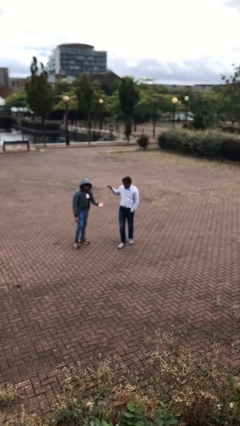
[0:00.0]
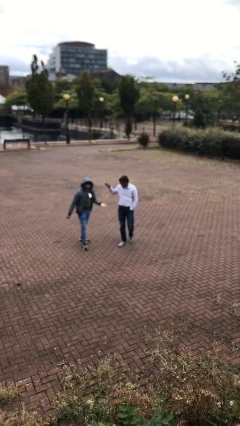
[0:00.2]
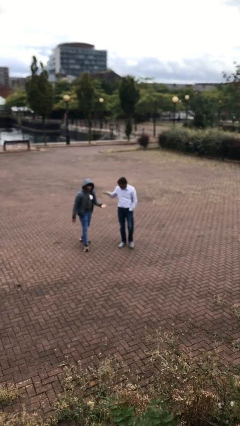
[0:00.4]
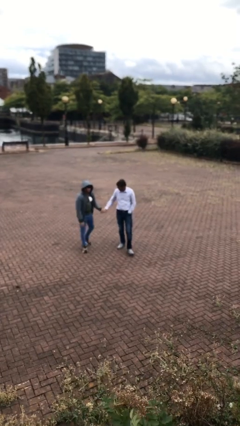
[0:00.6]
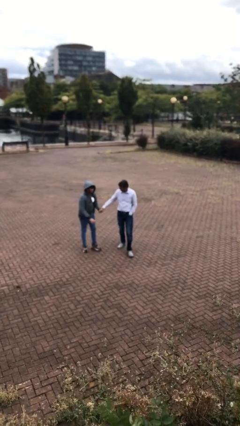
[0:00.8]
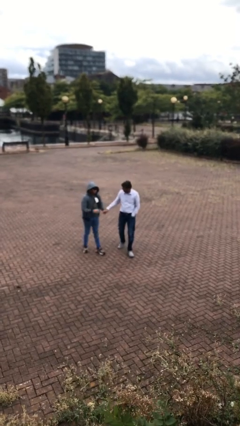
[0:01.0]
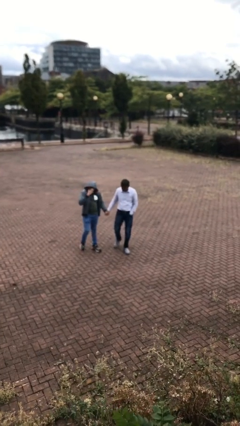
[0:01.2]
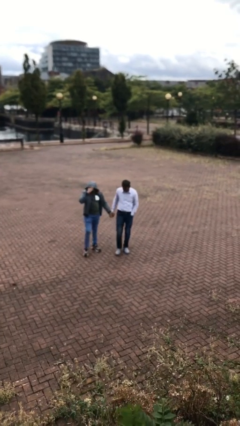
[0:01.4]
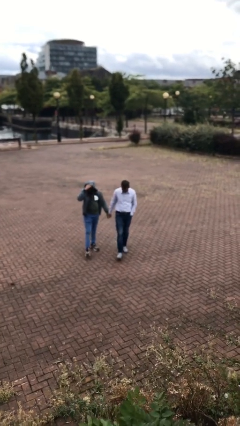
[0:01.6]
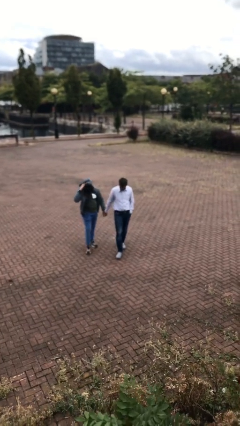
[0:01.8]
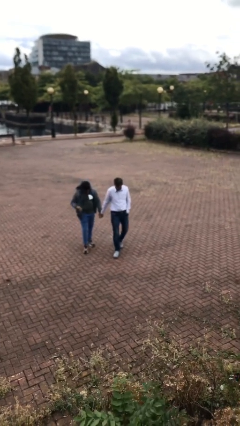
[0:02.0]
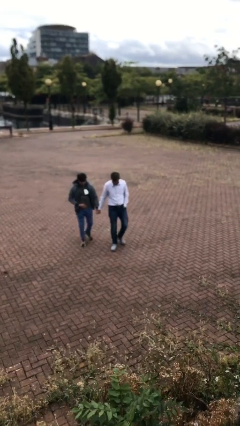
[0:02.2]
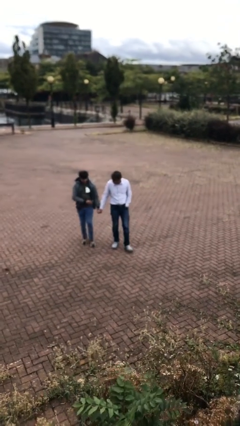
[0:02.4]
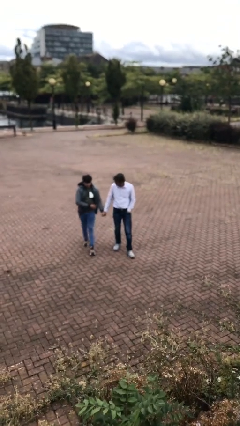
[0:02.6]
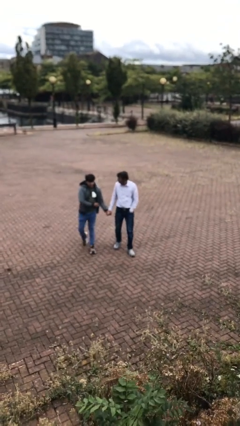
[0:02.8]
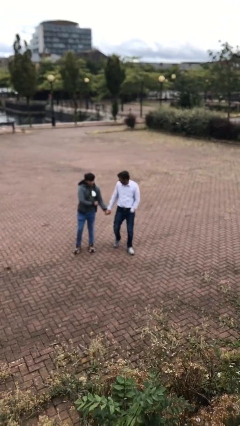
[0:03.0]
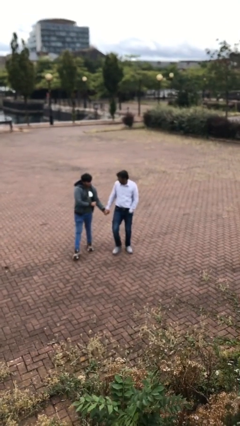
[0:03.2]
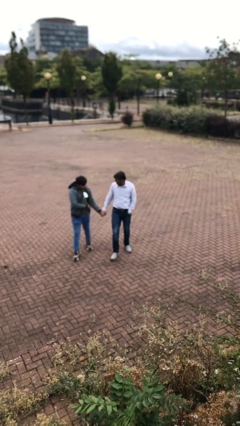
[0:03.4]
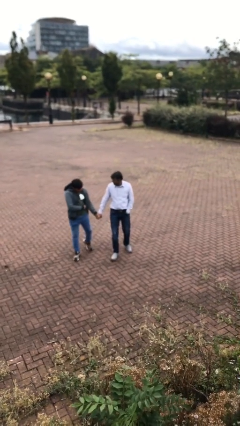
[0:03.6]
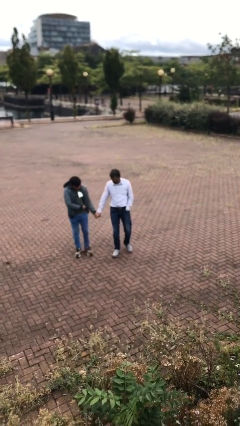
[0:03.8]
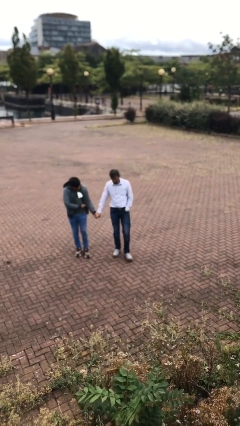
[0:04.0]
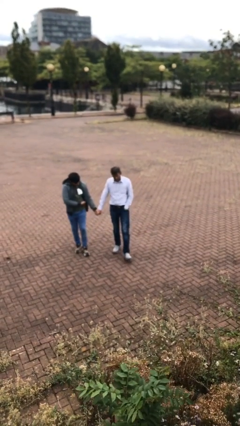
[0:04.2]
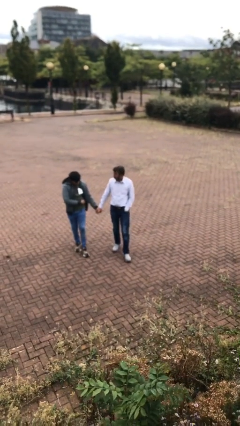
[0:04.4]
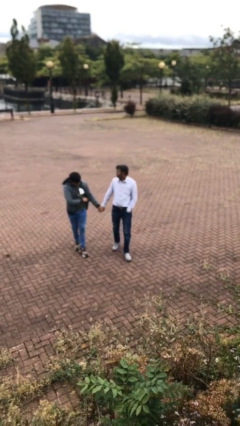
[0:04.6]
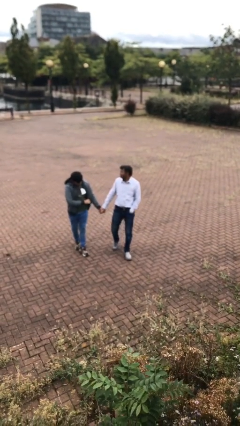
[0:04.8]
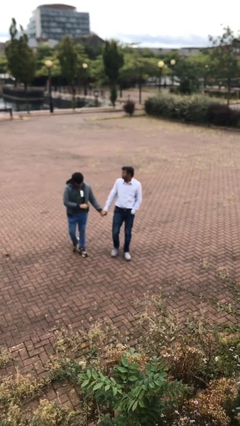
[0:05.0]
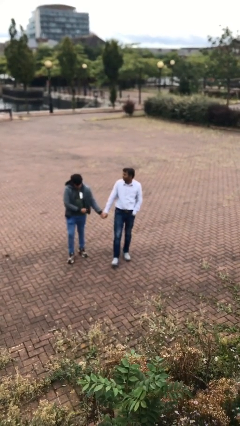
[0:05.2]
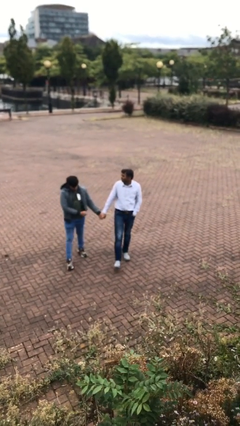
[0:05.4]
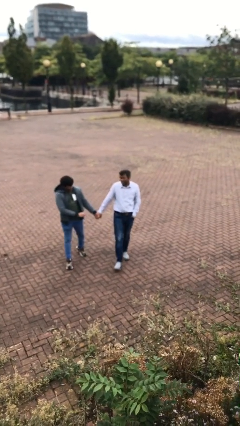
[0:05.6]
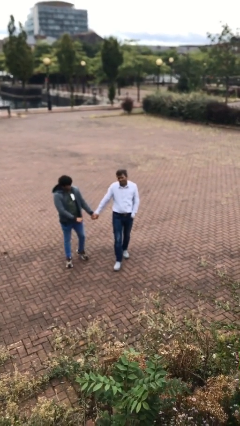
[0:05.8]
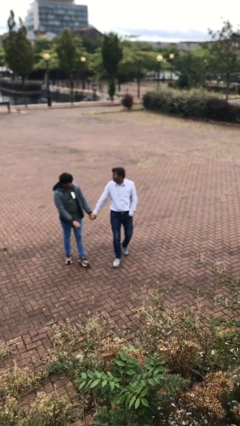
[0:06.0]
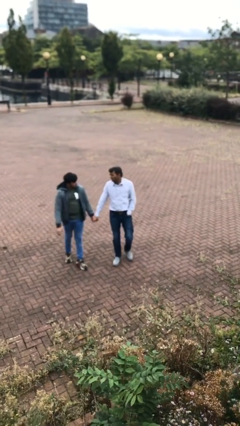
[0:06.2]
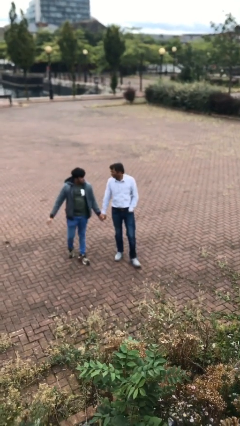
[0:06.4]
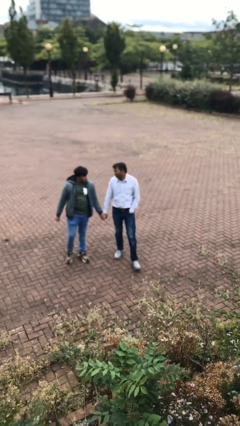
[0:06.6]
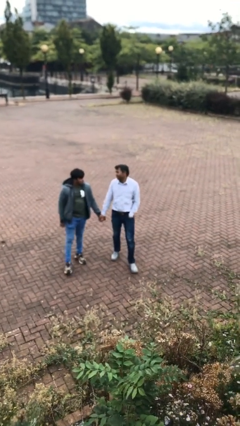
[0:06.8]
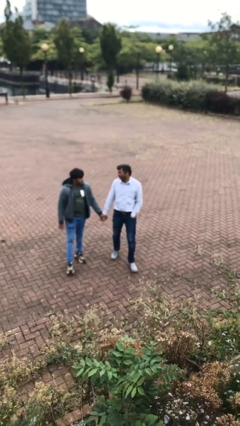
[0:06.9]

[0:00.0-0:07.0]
person holds hand

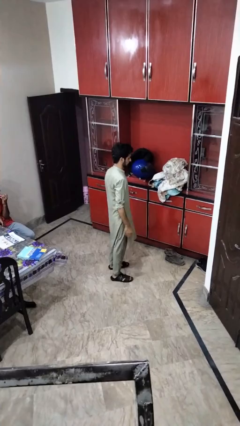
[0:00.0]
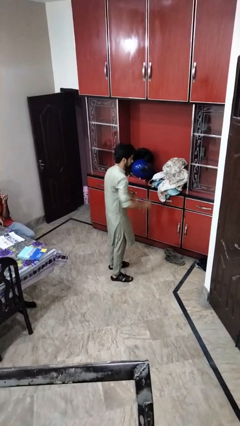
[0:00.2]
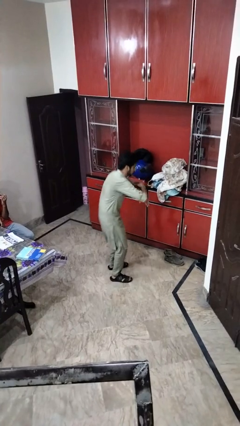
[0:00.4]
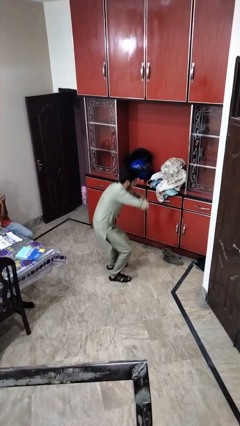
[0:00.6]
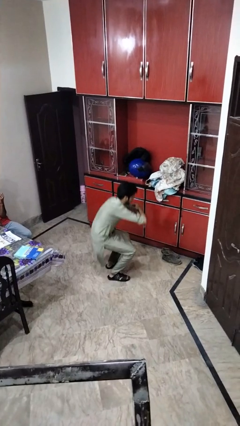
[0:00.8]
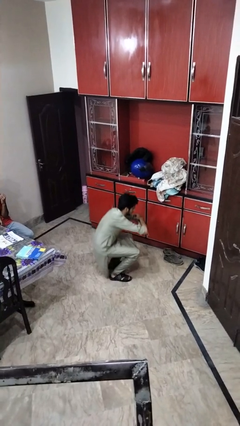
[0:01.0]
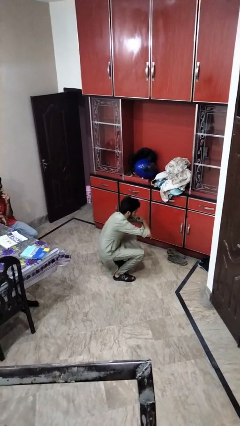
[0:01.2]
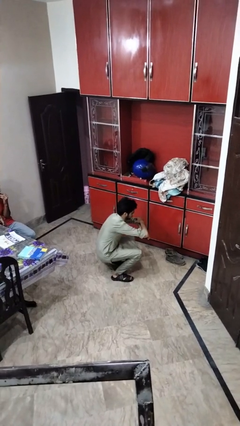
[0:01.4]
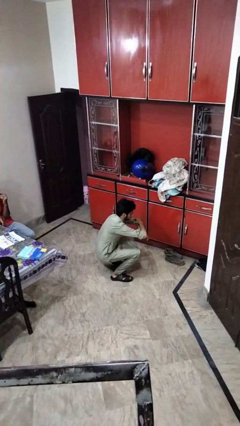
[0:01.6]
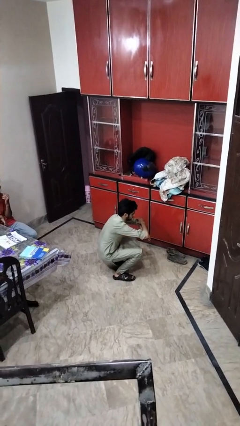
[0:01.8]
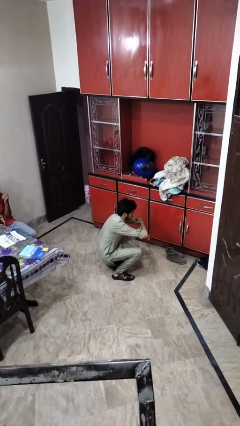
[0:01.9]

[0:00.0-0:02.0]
person squats

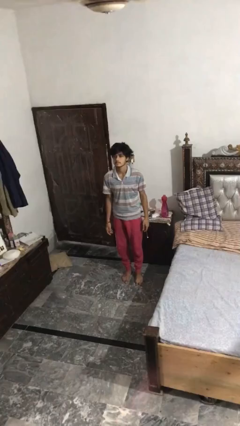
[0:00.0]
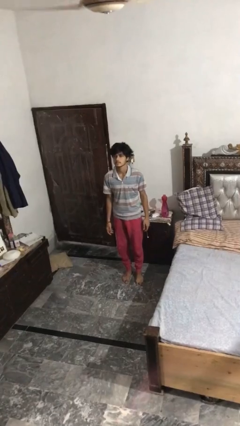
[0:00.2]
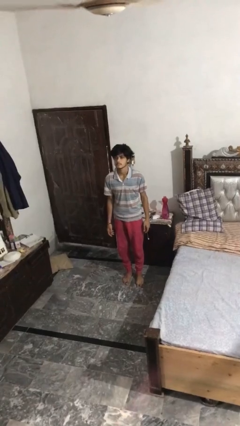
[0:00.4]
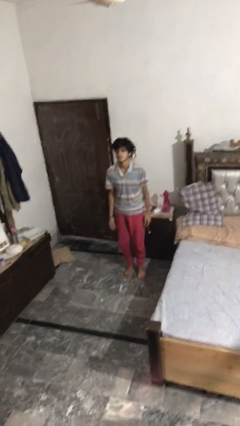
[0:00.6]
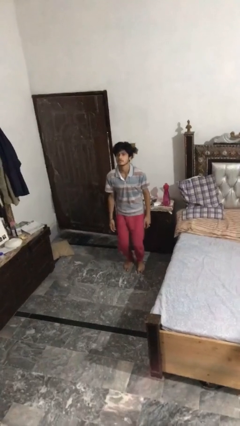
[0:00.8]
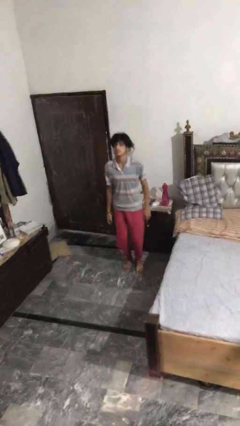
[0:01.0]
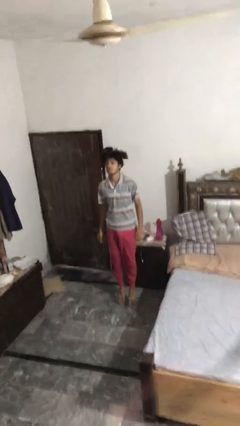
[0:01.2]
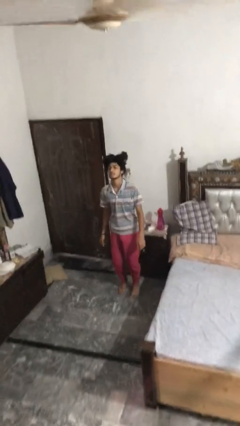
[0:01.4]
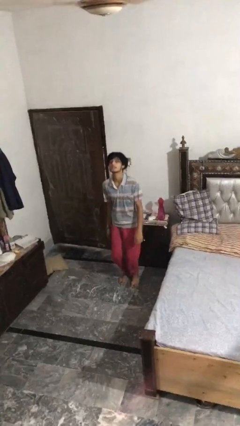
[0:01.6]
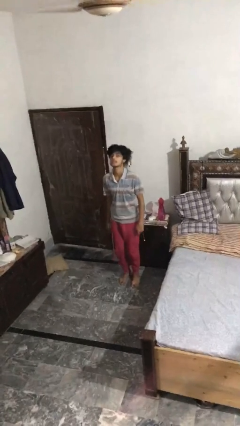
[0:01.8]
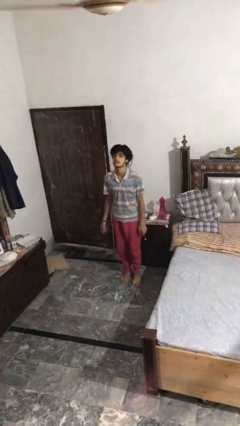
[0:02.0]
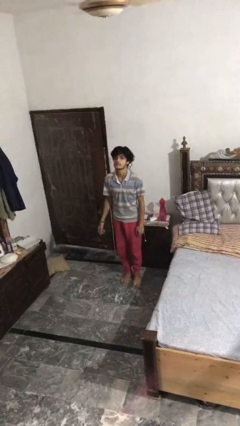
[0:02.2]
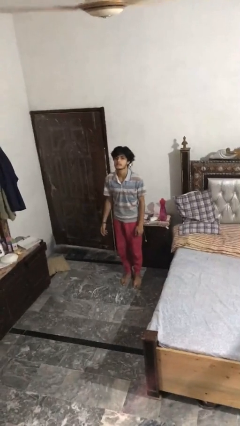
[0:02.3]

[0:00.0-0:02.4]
person jumps

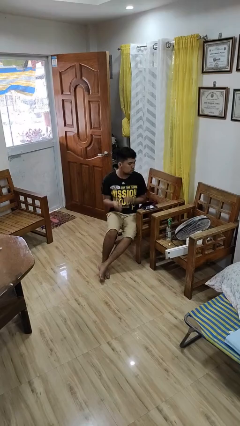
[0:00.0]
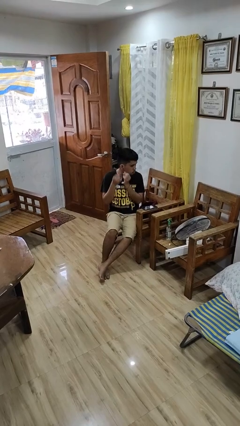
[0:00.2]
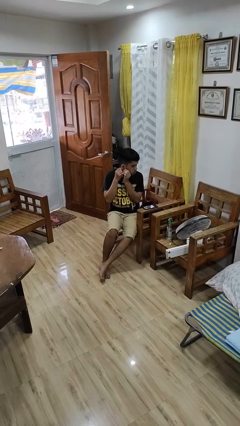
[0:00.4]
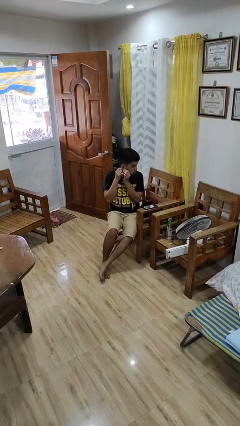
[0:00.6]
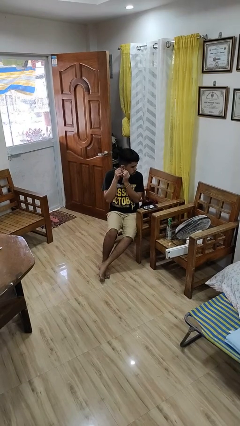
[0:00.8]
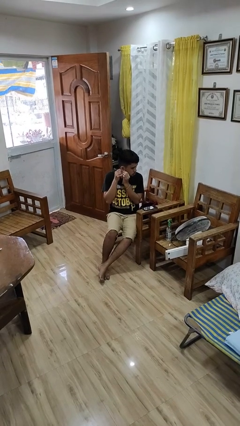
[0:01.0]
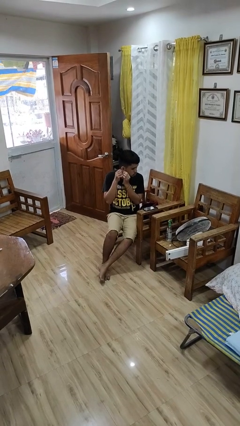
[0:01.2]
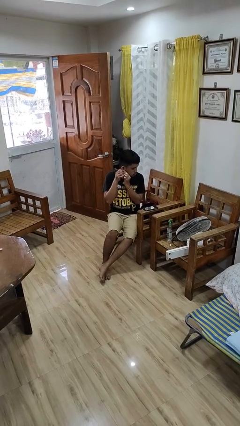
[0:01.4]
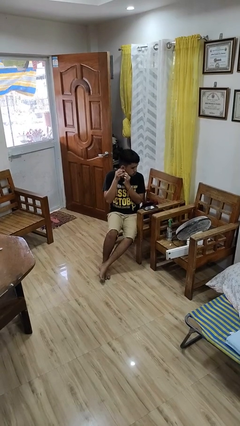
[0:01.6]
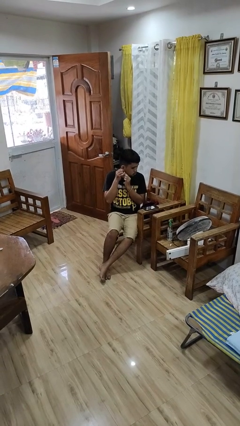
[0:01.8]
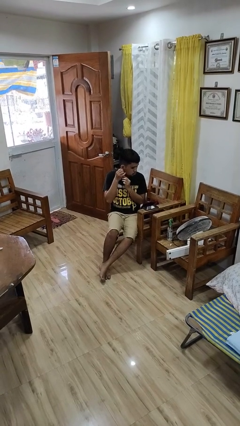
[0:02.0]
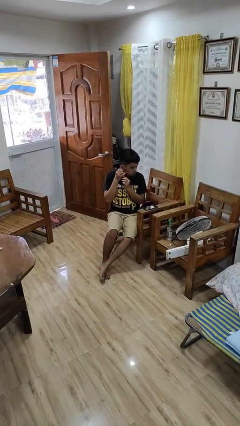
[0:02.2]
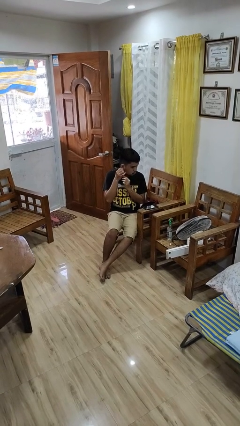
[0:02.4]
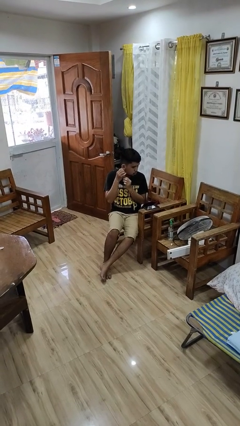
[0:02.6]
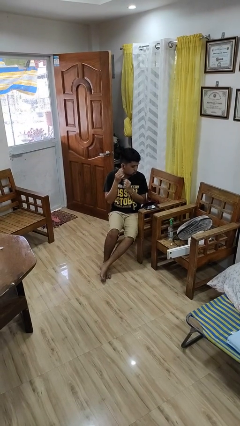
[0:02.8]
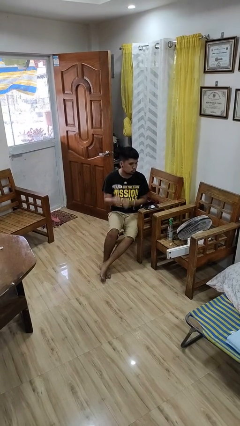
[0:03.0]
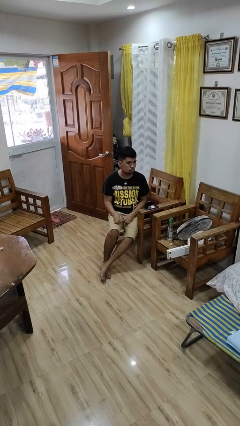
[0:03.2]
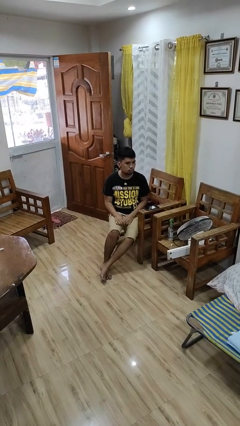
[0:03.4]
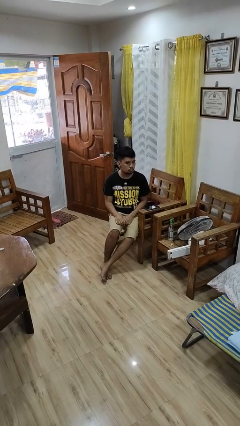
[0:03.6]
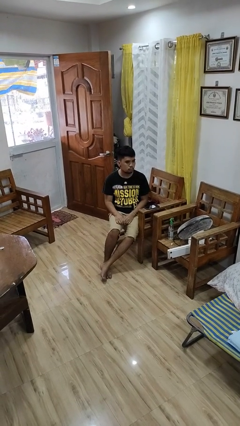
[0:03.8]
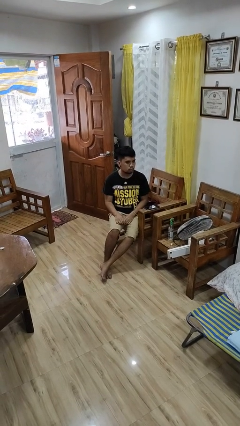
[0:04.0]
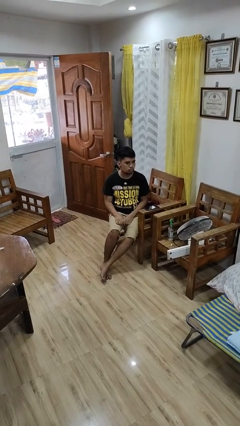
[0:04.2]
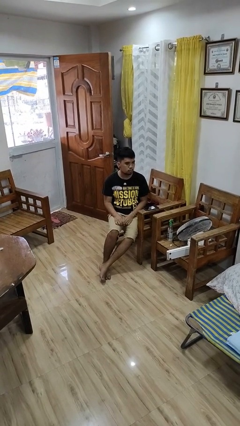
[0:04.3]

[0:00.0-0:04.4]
person puts on earrings

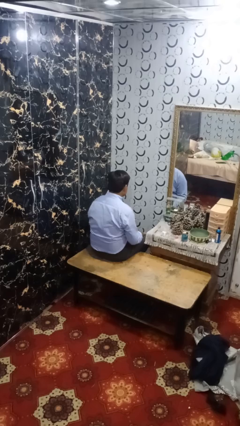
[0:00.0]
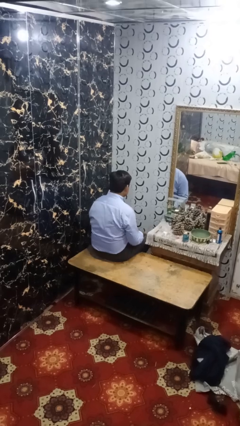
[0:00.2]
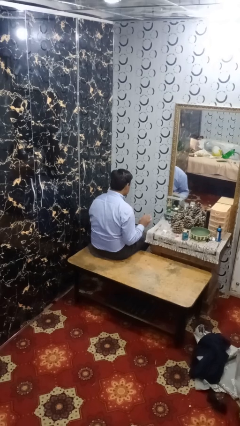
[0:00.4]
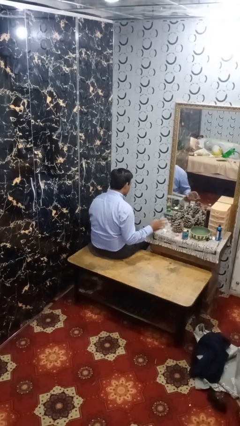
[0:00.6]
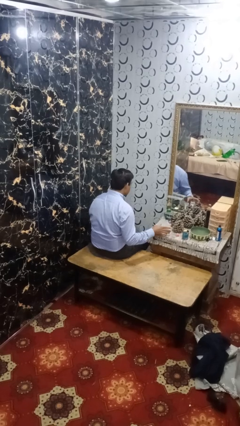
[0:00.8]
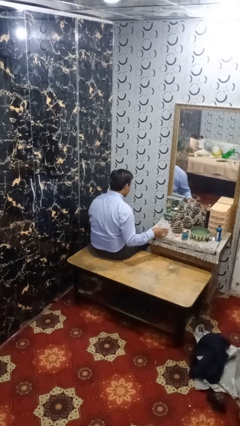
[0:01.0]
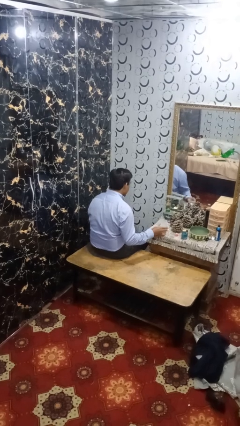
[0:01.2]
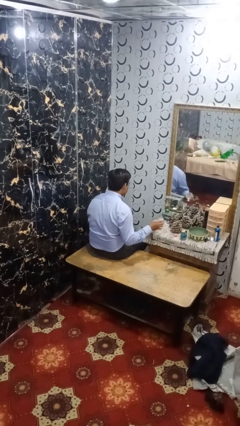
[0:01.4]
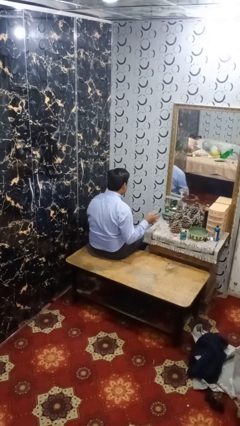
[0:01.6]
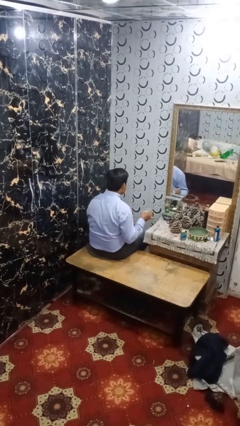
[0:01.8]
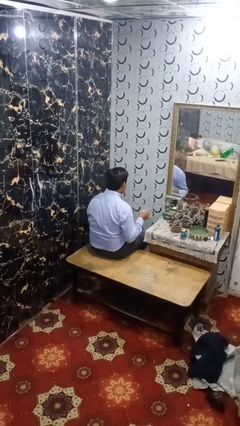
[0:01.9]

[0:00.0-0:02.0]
person picks up object from table
